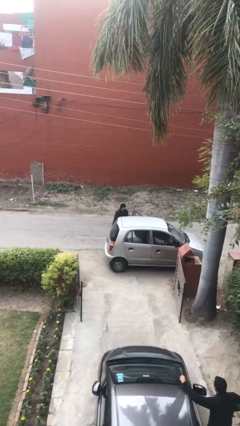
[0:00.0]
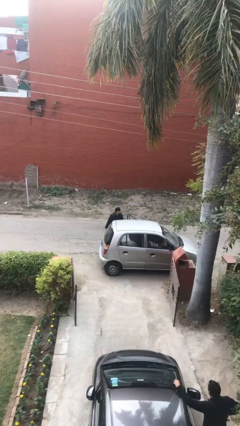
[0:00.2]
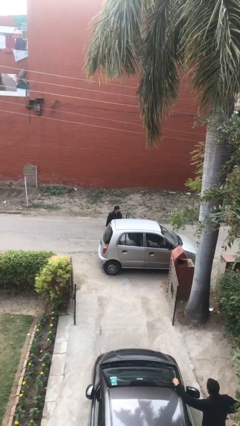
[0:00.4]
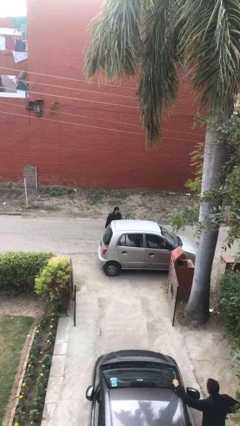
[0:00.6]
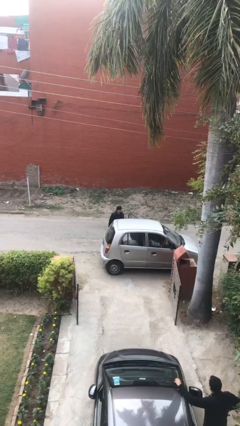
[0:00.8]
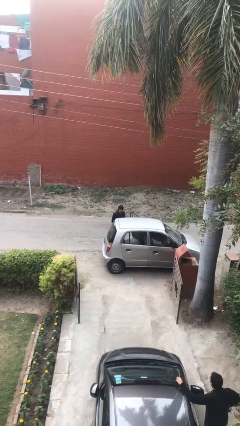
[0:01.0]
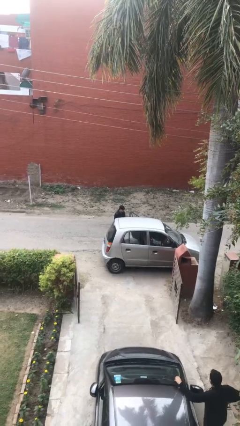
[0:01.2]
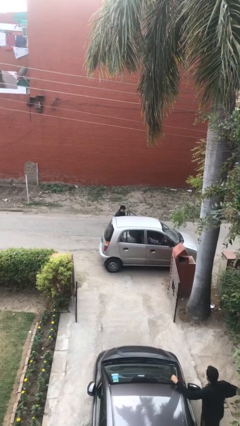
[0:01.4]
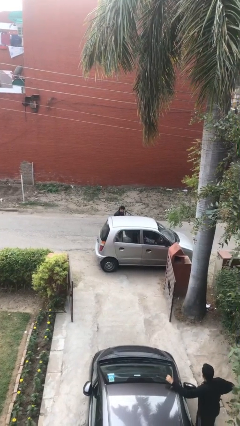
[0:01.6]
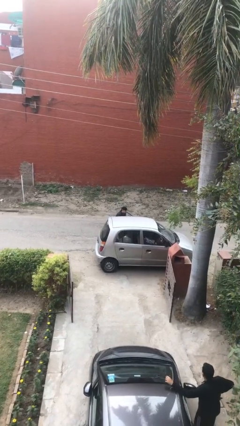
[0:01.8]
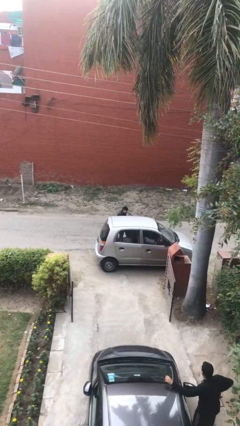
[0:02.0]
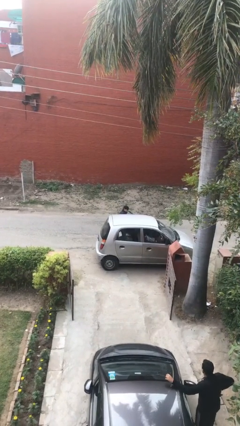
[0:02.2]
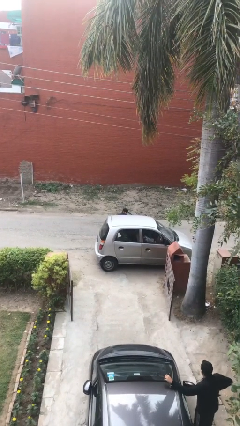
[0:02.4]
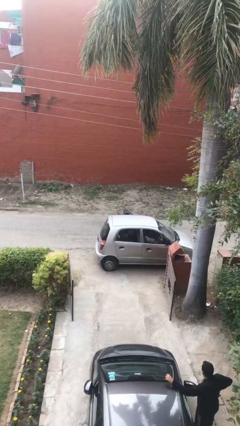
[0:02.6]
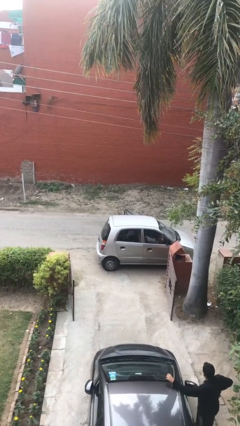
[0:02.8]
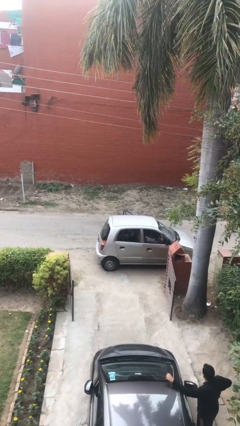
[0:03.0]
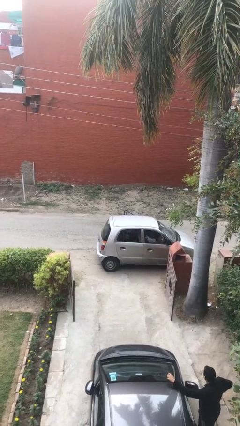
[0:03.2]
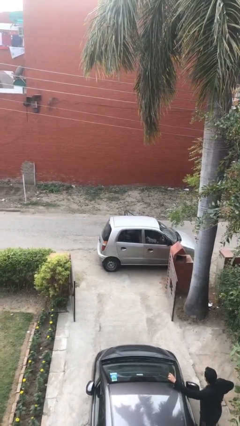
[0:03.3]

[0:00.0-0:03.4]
person enters car

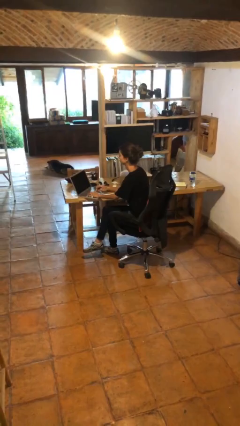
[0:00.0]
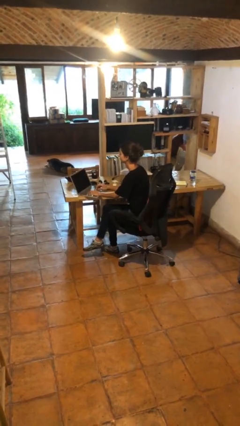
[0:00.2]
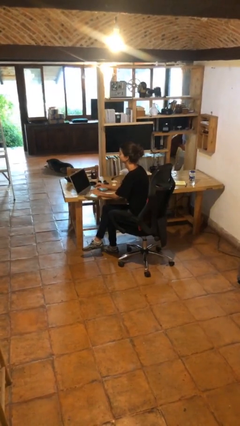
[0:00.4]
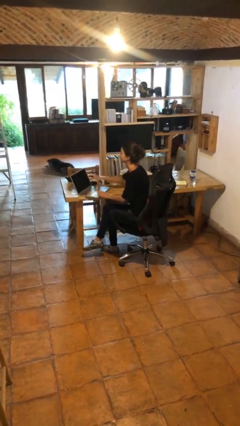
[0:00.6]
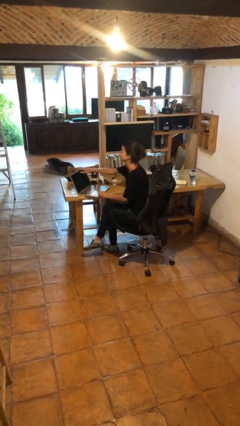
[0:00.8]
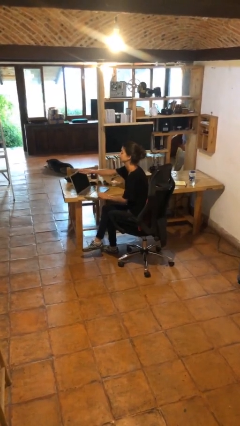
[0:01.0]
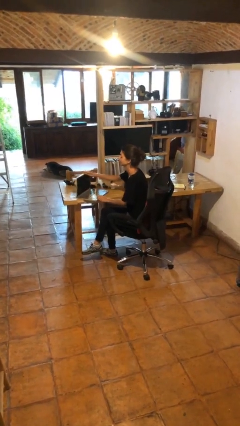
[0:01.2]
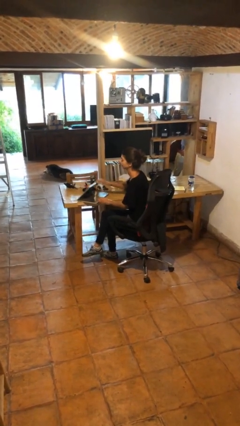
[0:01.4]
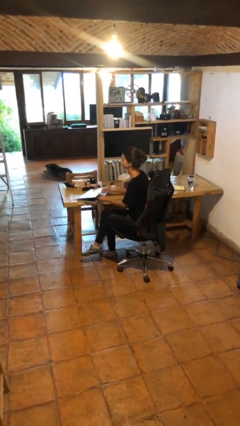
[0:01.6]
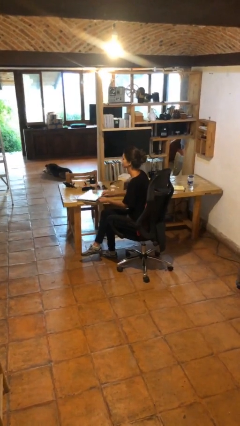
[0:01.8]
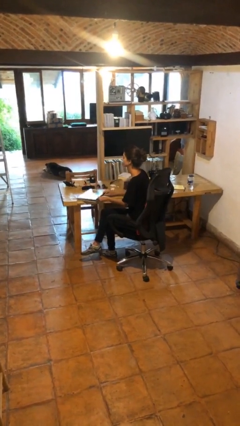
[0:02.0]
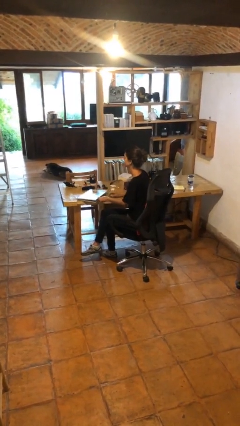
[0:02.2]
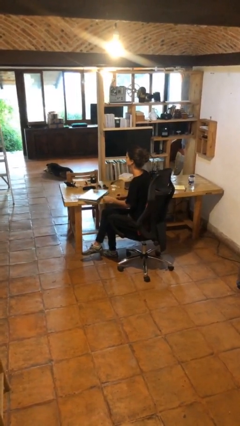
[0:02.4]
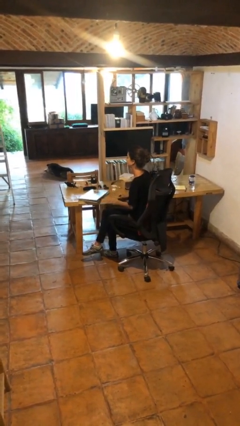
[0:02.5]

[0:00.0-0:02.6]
person closes laptop

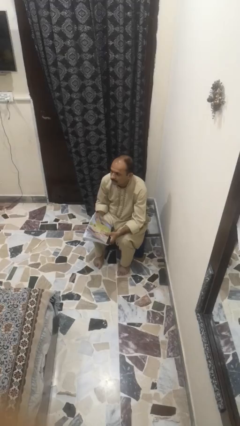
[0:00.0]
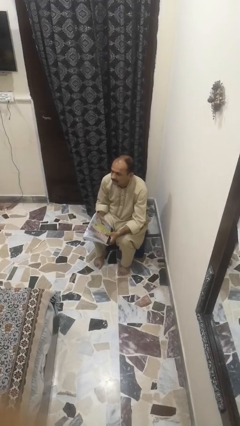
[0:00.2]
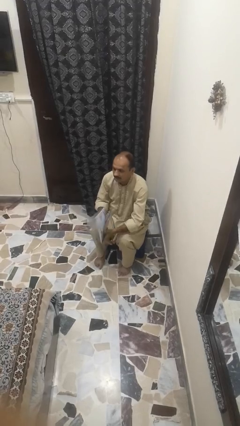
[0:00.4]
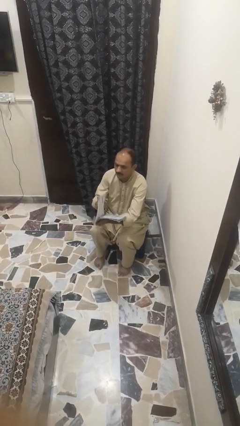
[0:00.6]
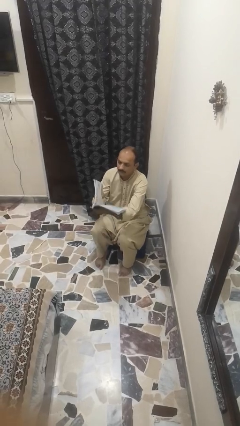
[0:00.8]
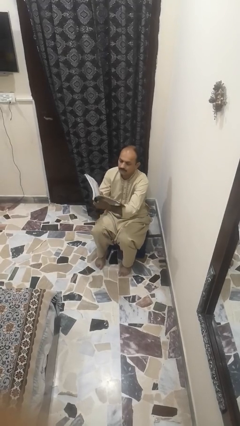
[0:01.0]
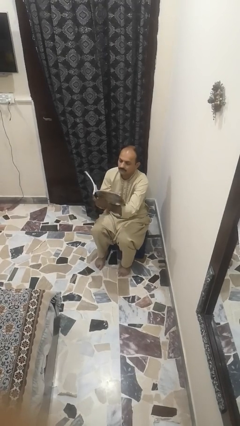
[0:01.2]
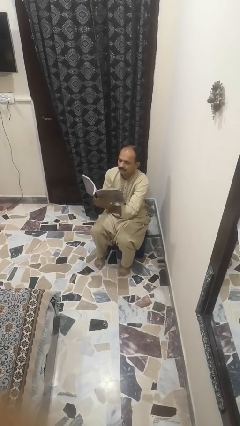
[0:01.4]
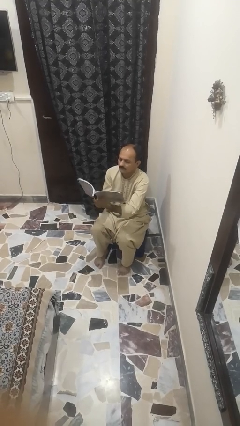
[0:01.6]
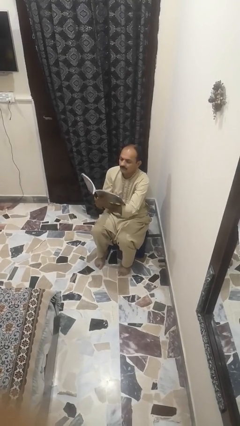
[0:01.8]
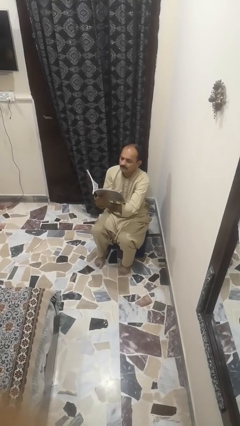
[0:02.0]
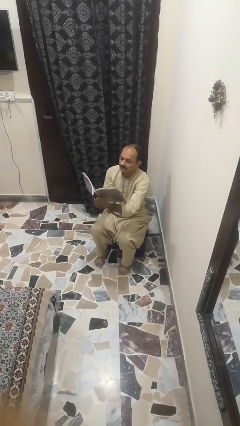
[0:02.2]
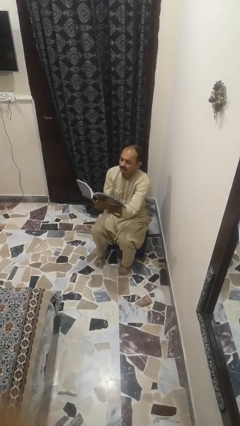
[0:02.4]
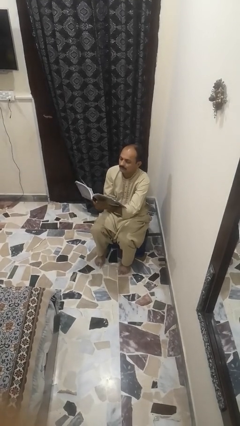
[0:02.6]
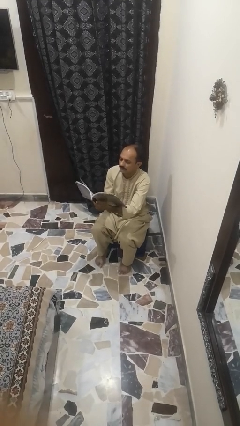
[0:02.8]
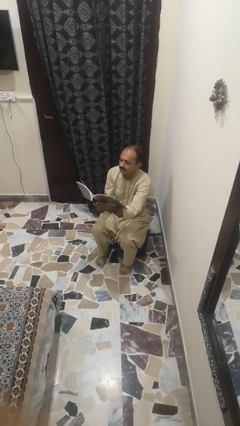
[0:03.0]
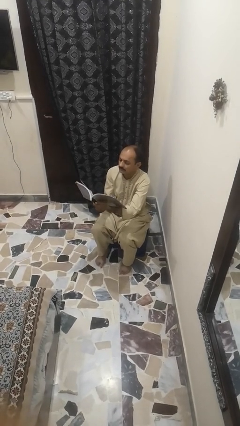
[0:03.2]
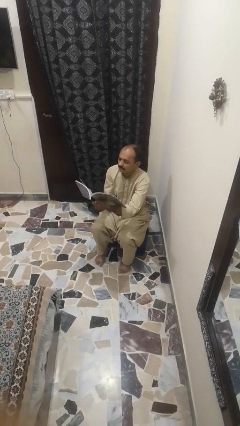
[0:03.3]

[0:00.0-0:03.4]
person reads book

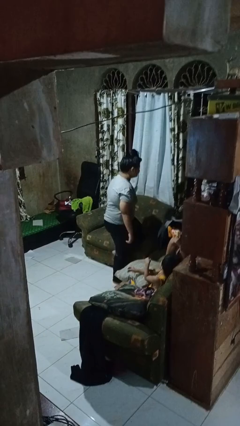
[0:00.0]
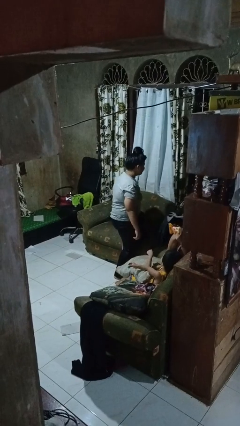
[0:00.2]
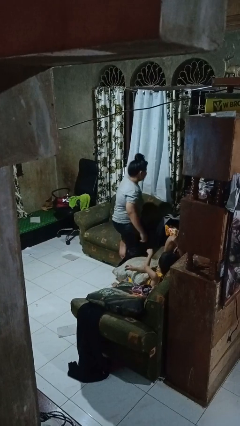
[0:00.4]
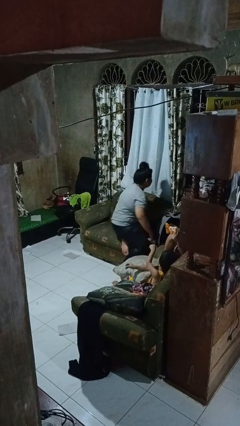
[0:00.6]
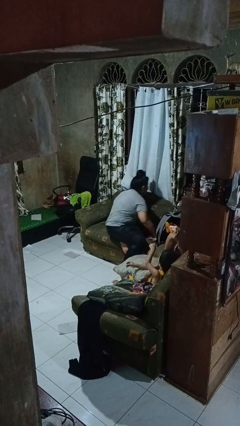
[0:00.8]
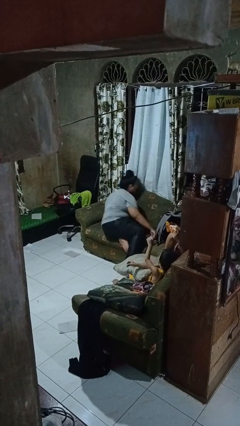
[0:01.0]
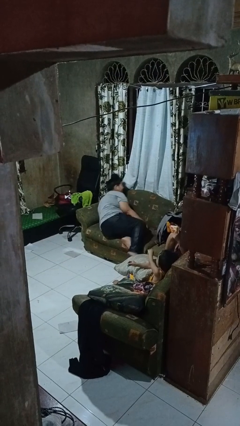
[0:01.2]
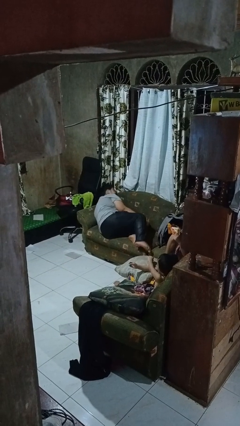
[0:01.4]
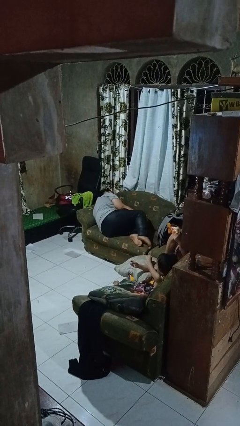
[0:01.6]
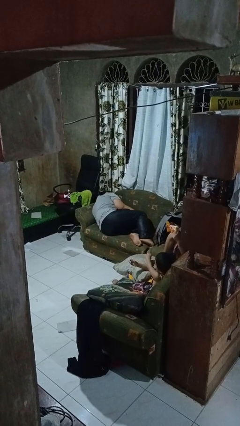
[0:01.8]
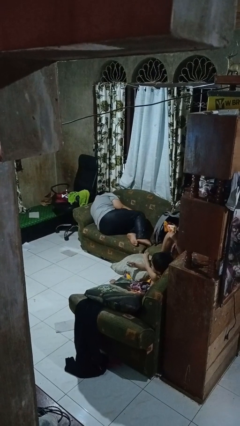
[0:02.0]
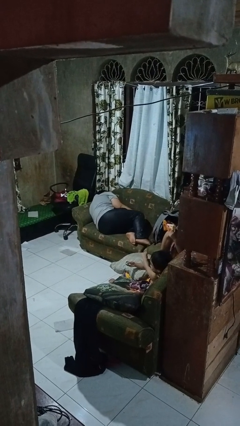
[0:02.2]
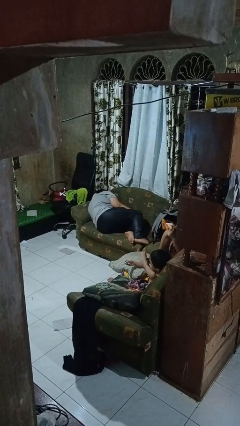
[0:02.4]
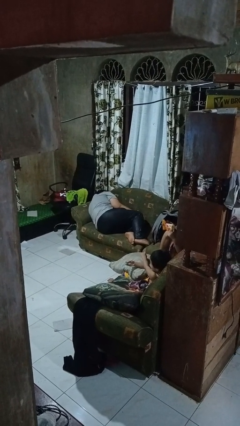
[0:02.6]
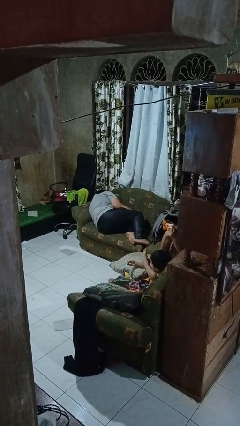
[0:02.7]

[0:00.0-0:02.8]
person lies down on couch

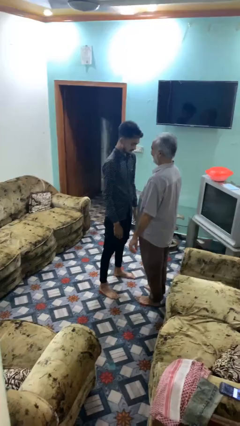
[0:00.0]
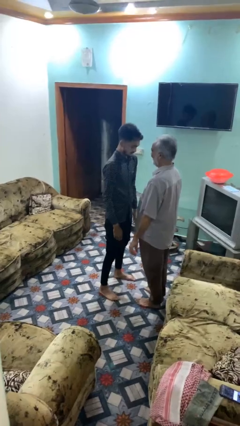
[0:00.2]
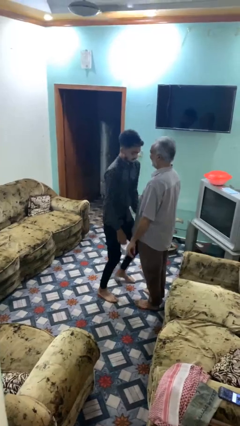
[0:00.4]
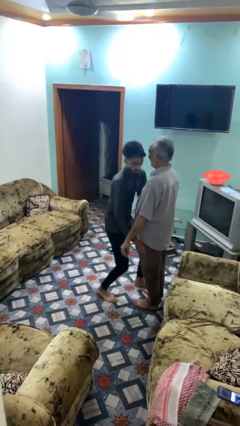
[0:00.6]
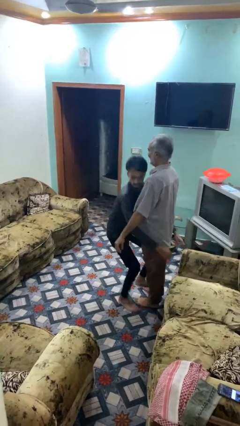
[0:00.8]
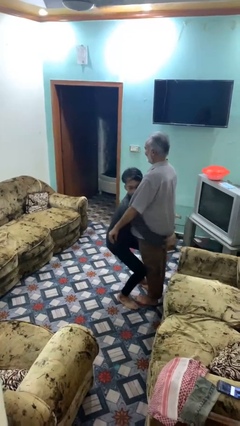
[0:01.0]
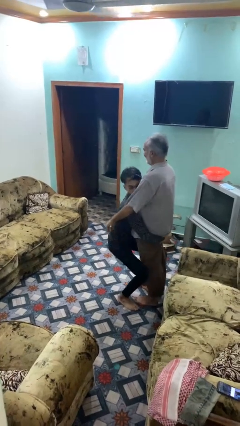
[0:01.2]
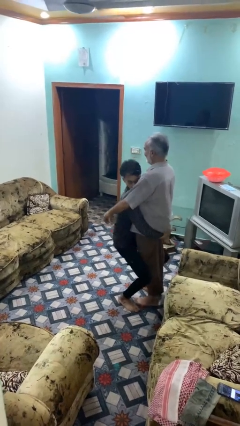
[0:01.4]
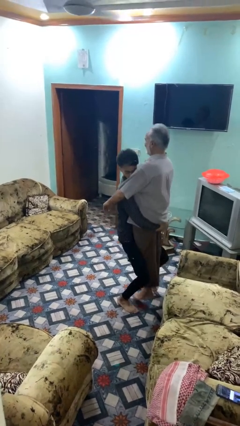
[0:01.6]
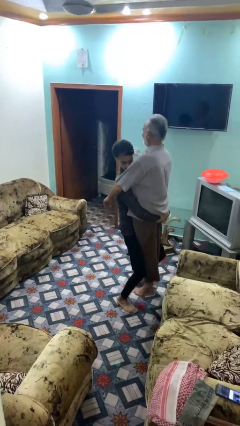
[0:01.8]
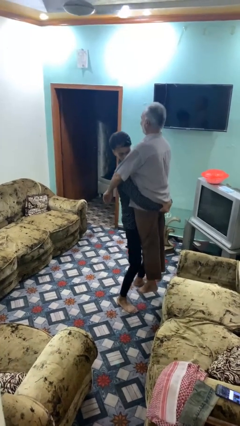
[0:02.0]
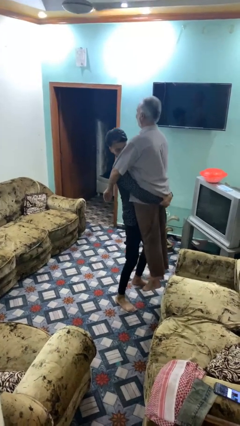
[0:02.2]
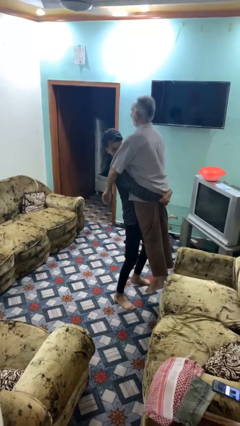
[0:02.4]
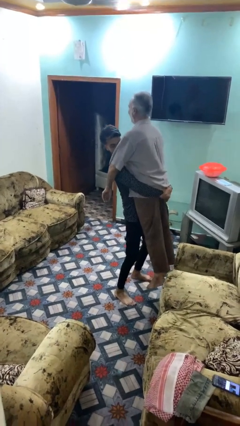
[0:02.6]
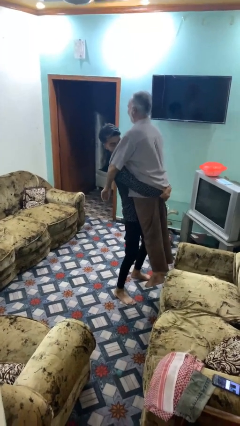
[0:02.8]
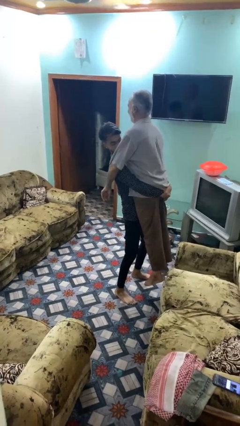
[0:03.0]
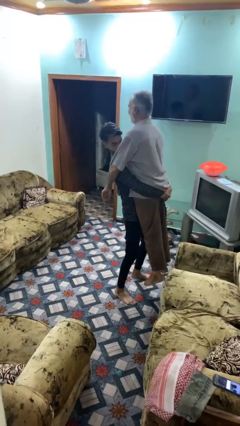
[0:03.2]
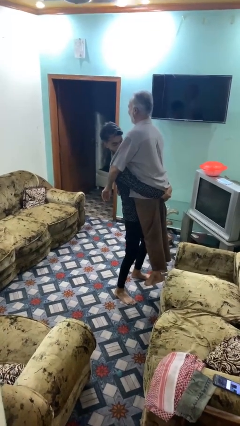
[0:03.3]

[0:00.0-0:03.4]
person picks up person

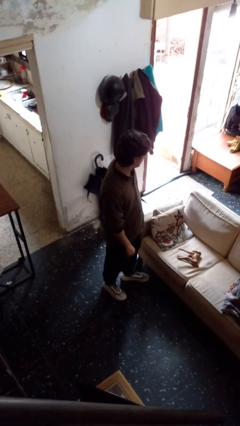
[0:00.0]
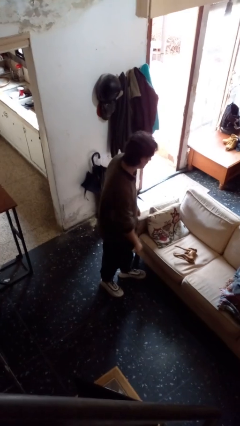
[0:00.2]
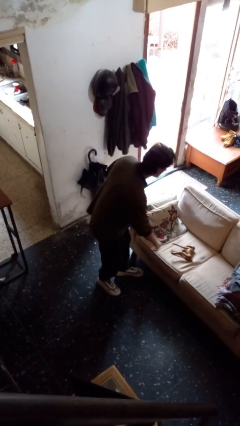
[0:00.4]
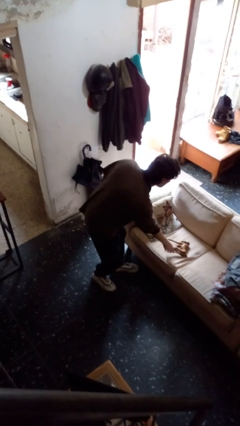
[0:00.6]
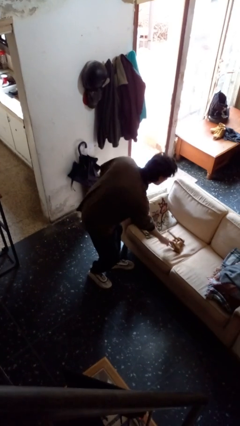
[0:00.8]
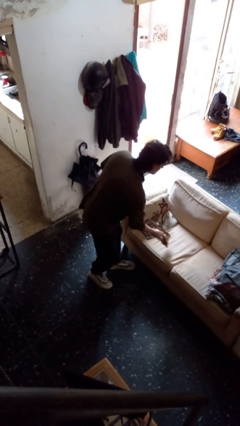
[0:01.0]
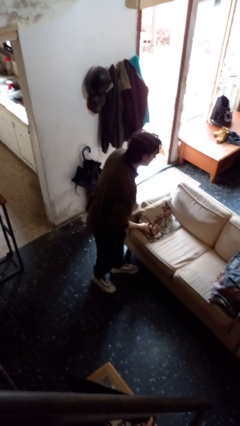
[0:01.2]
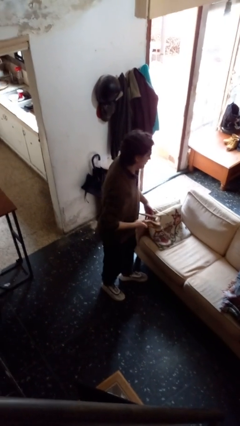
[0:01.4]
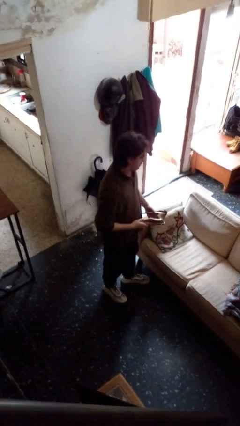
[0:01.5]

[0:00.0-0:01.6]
person picks up object from couch

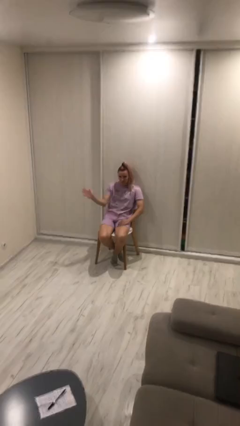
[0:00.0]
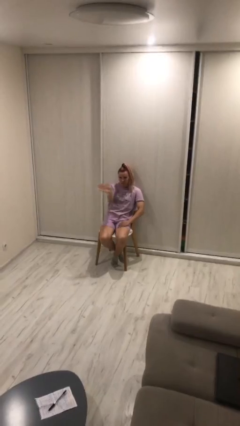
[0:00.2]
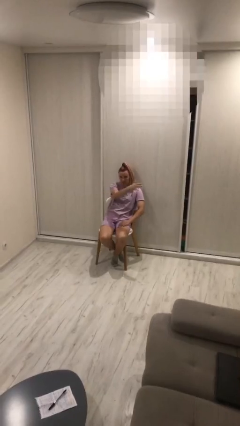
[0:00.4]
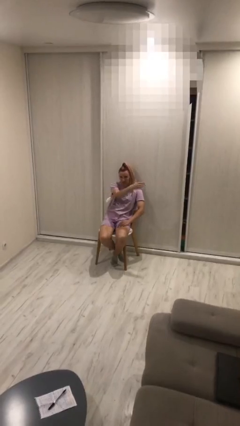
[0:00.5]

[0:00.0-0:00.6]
person gestures swipe left
